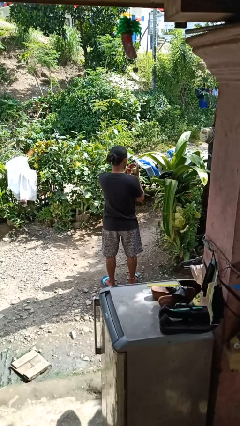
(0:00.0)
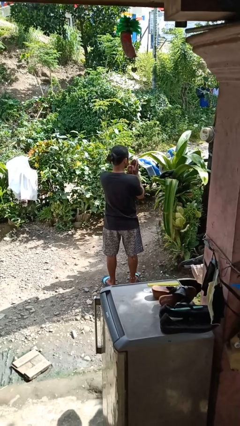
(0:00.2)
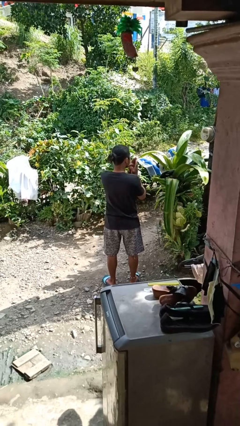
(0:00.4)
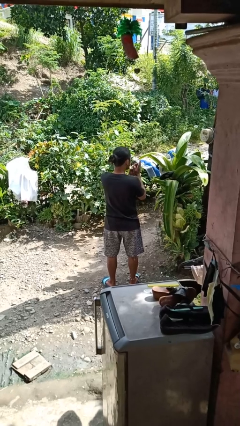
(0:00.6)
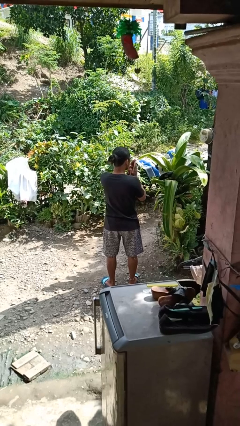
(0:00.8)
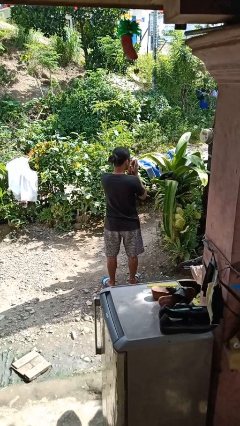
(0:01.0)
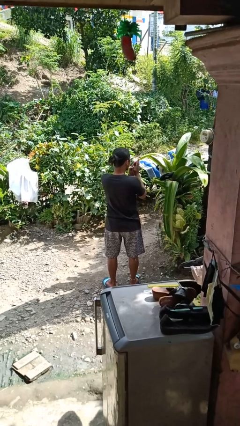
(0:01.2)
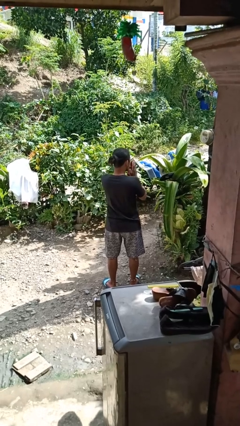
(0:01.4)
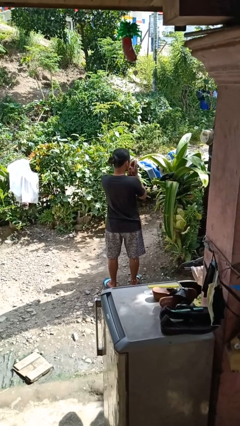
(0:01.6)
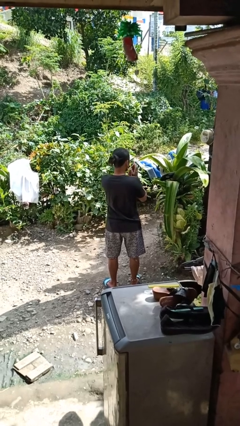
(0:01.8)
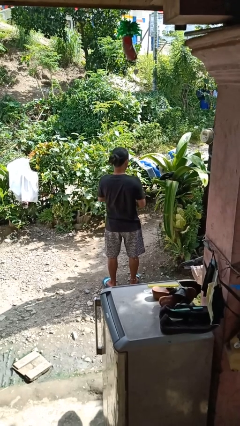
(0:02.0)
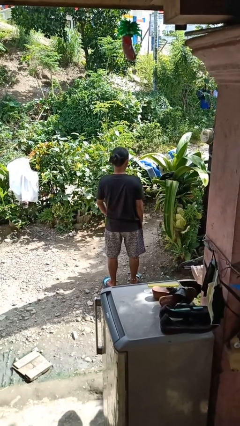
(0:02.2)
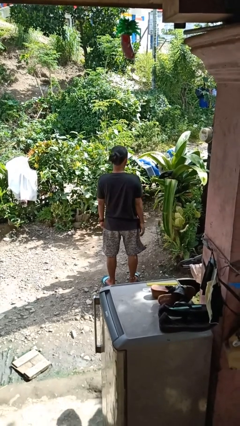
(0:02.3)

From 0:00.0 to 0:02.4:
person blows into hands

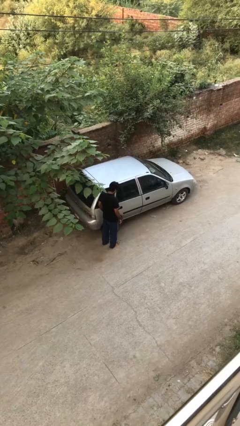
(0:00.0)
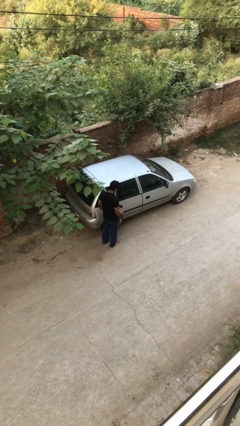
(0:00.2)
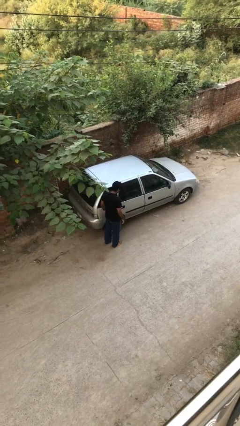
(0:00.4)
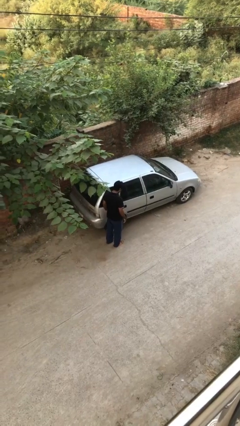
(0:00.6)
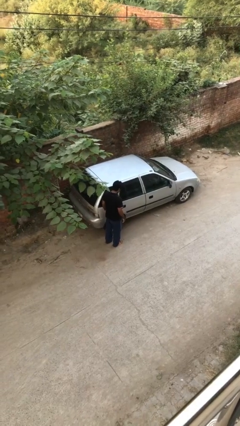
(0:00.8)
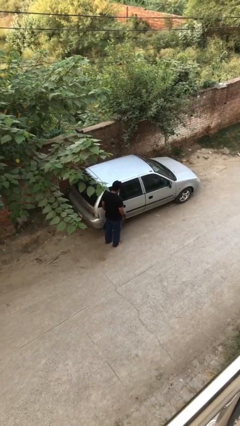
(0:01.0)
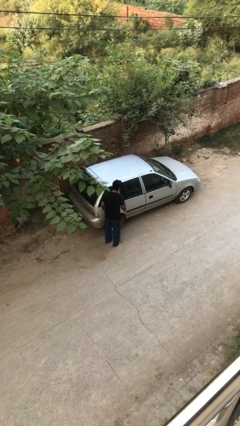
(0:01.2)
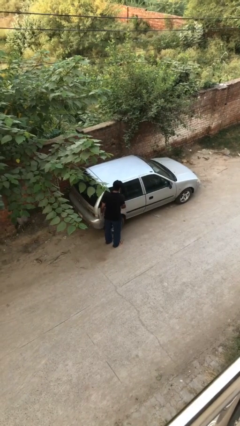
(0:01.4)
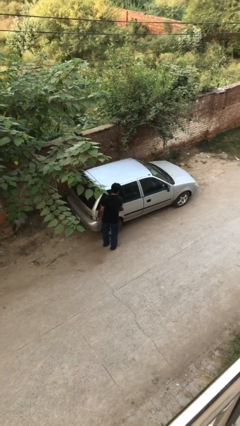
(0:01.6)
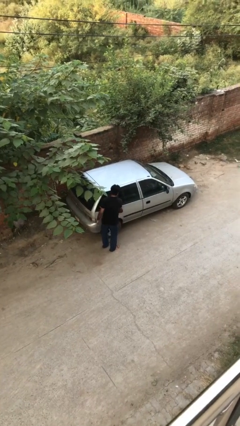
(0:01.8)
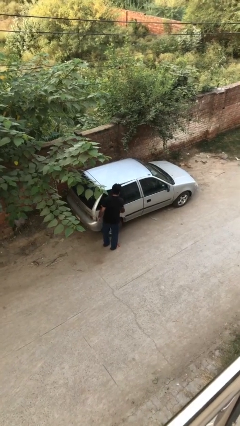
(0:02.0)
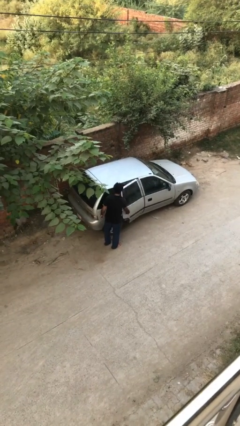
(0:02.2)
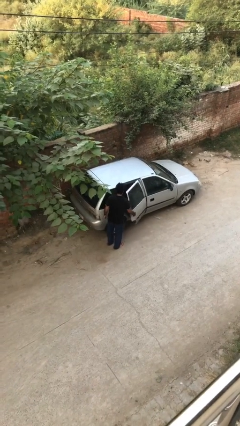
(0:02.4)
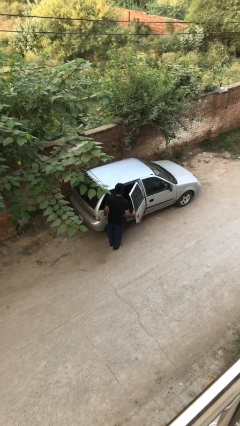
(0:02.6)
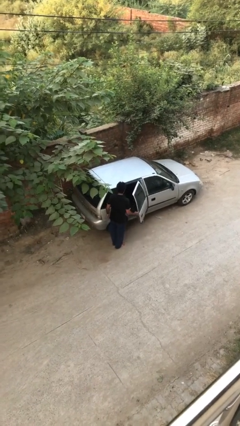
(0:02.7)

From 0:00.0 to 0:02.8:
person opens car door

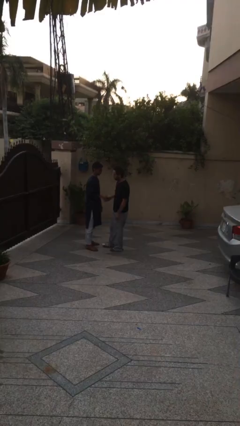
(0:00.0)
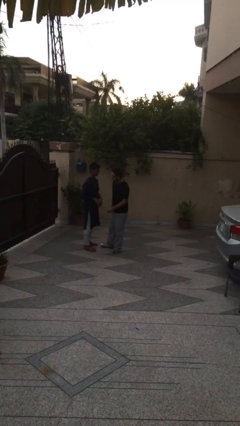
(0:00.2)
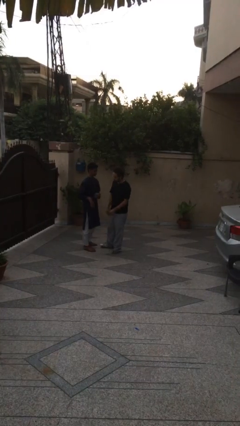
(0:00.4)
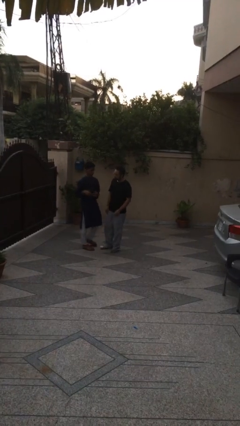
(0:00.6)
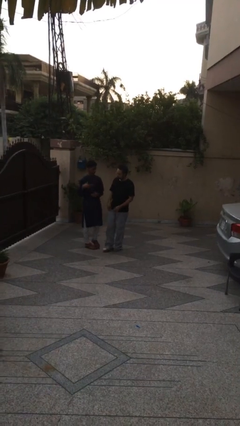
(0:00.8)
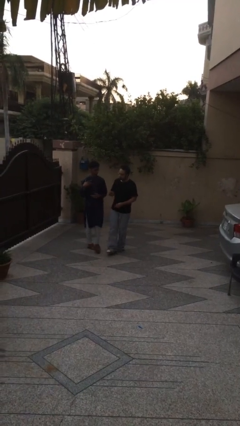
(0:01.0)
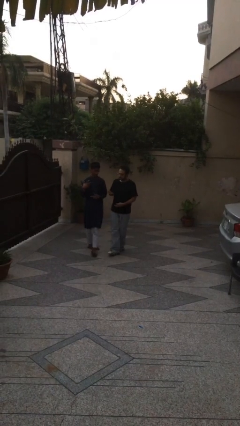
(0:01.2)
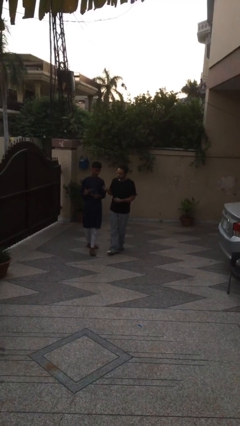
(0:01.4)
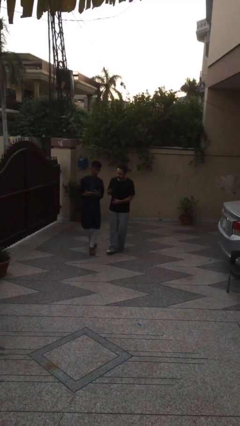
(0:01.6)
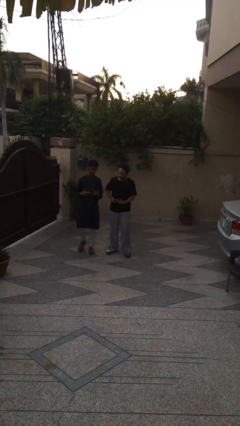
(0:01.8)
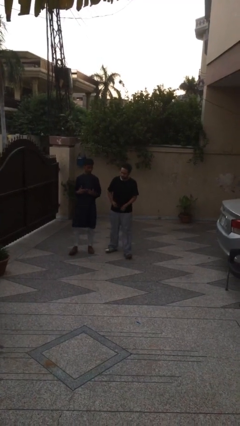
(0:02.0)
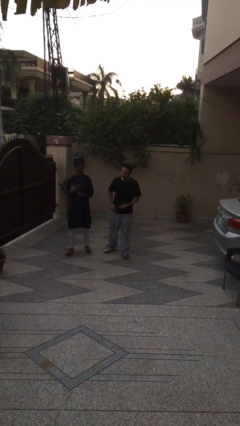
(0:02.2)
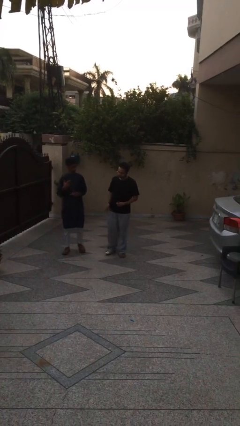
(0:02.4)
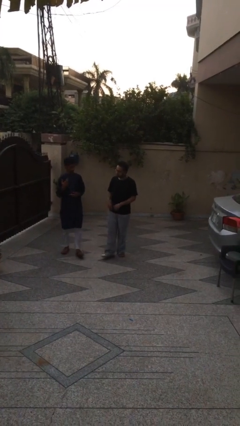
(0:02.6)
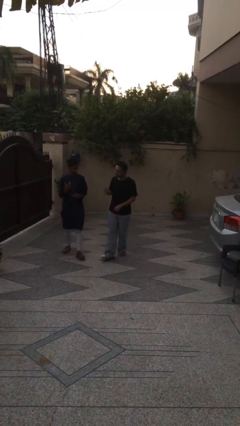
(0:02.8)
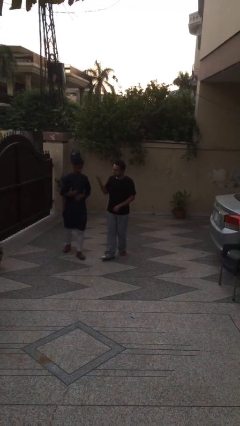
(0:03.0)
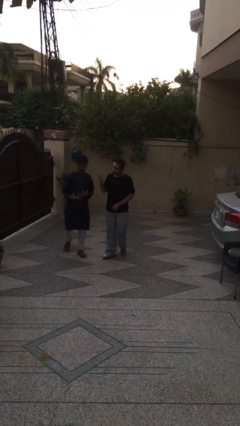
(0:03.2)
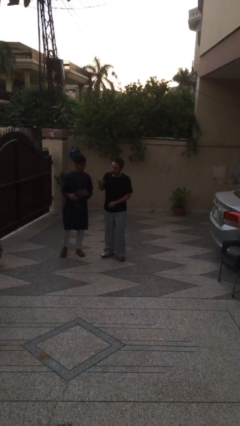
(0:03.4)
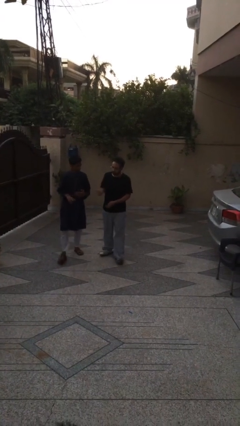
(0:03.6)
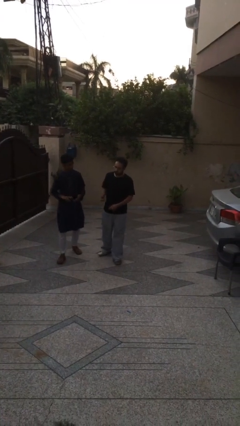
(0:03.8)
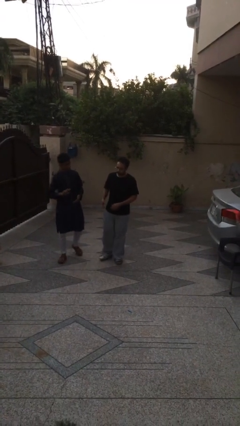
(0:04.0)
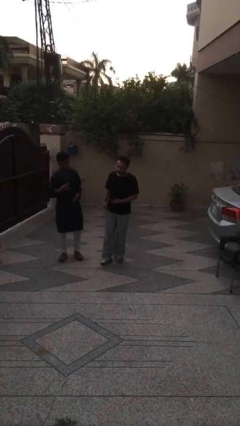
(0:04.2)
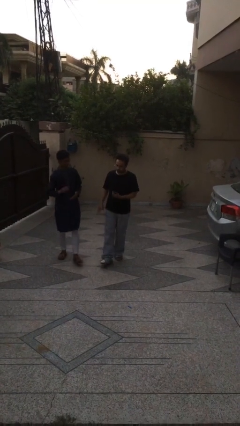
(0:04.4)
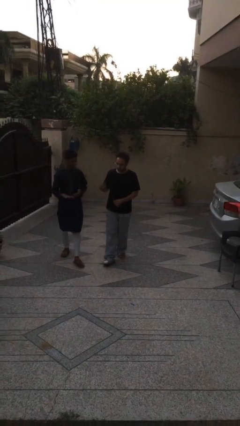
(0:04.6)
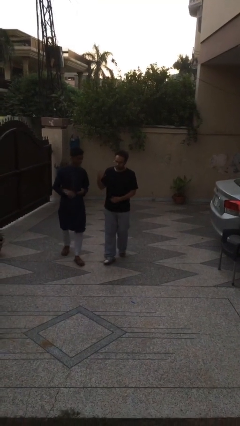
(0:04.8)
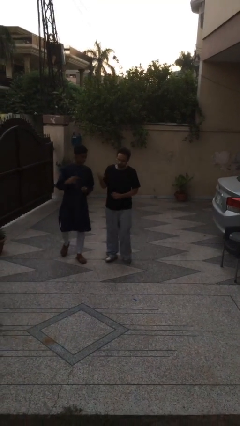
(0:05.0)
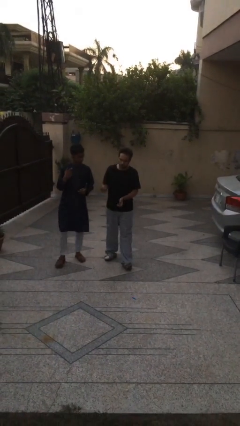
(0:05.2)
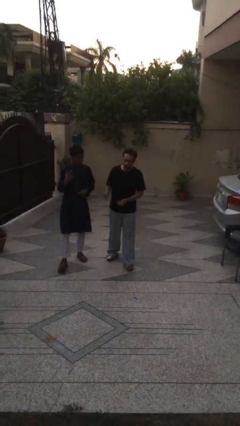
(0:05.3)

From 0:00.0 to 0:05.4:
person talks to person

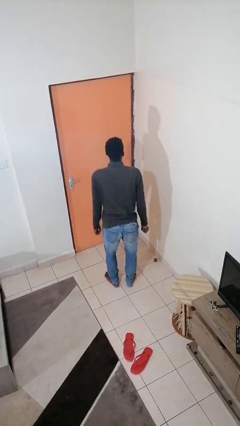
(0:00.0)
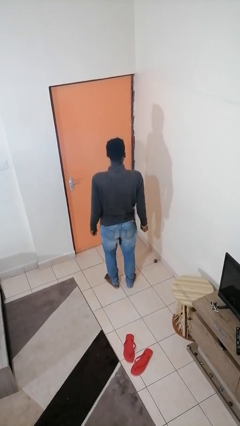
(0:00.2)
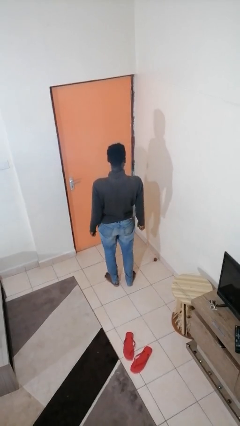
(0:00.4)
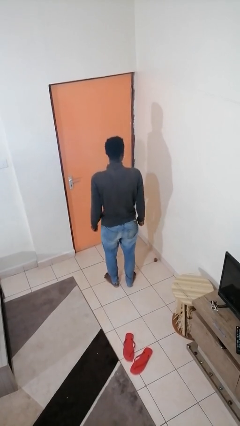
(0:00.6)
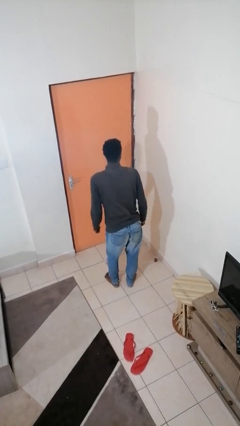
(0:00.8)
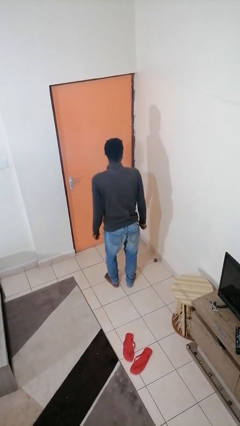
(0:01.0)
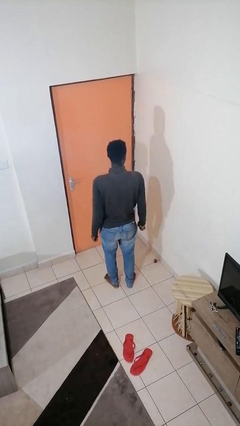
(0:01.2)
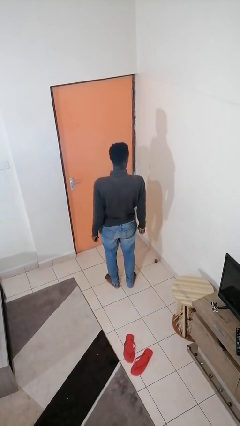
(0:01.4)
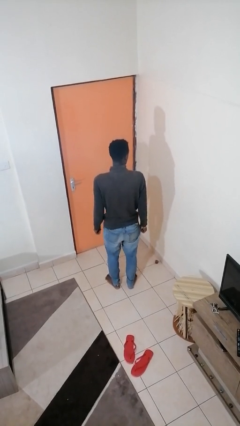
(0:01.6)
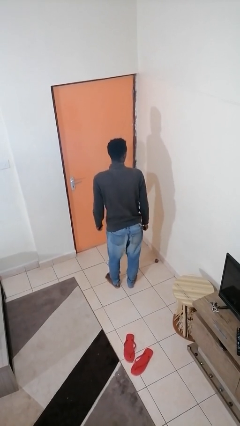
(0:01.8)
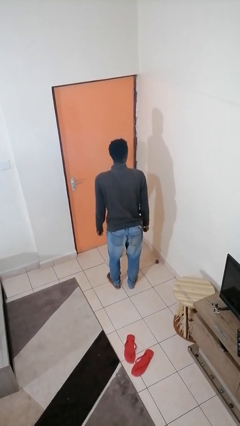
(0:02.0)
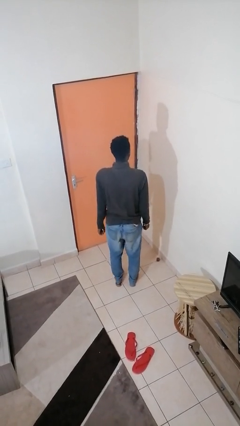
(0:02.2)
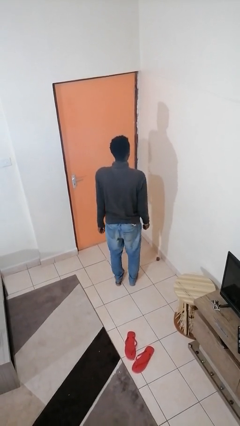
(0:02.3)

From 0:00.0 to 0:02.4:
person wiggles hips

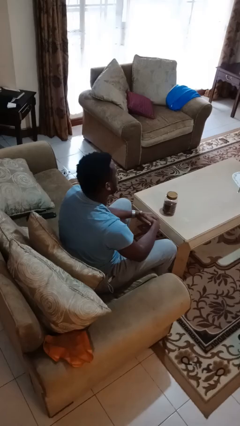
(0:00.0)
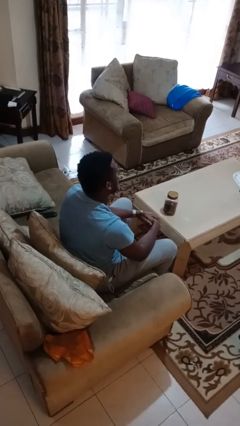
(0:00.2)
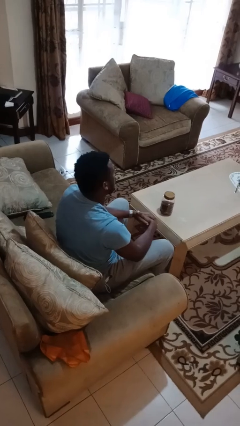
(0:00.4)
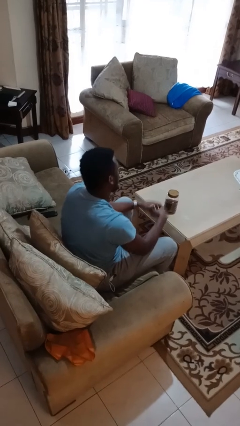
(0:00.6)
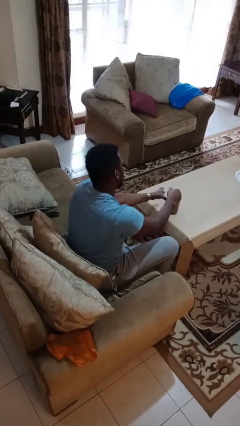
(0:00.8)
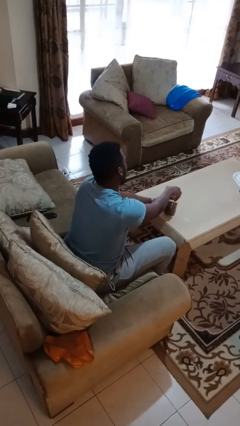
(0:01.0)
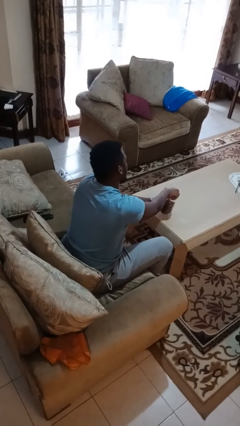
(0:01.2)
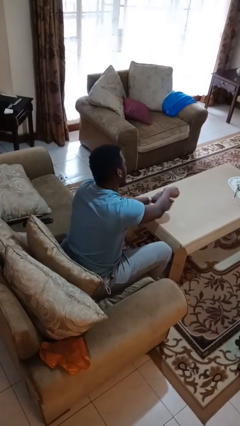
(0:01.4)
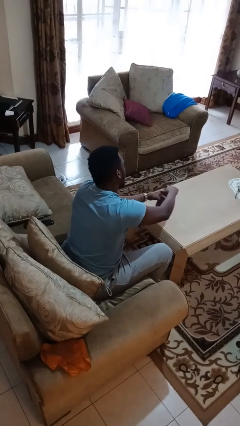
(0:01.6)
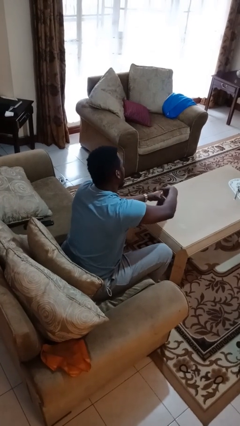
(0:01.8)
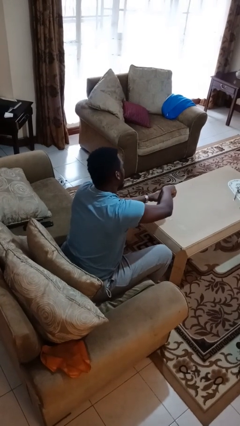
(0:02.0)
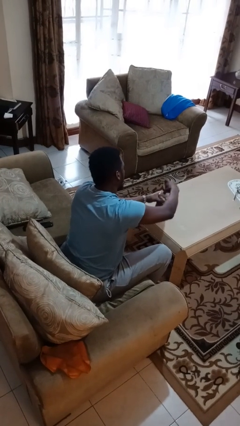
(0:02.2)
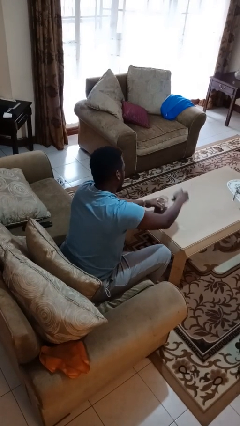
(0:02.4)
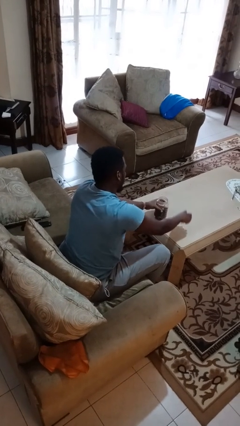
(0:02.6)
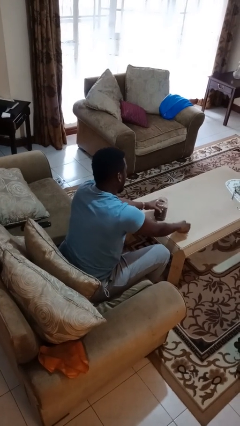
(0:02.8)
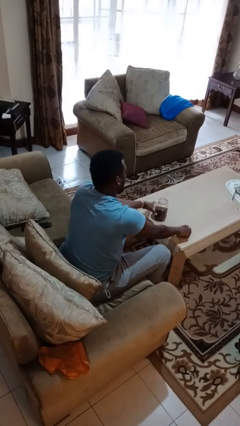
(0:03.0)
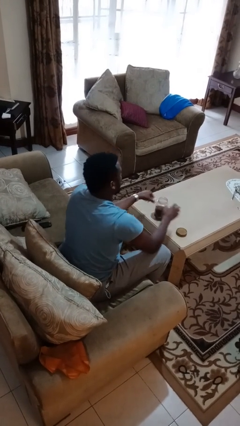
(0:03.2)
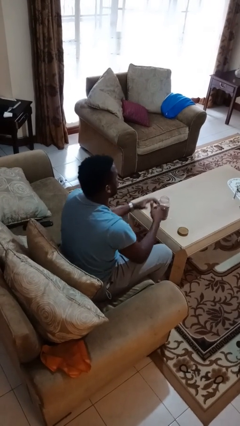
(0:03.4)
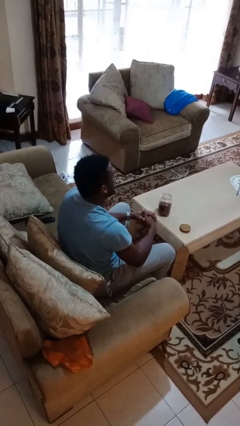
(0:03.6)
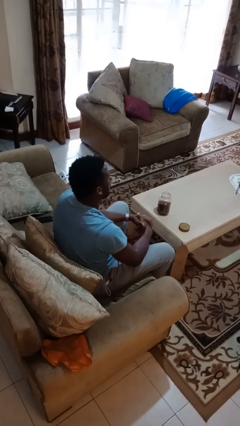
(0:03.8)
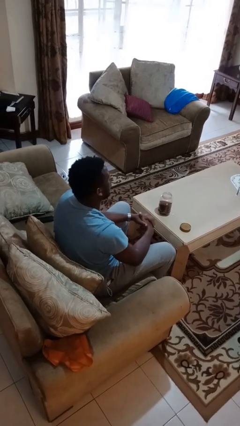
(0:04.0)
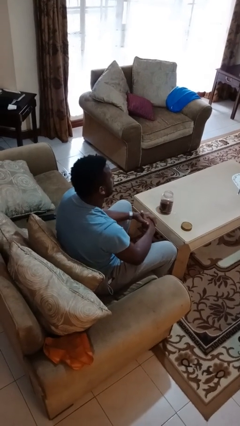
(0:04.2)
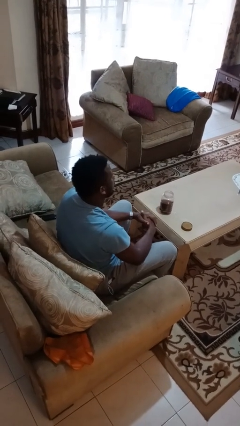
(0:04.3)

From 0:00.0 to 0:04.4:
person opens jar
